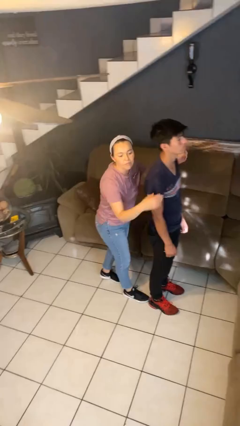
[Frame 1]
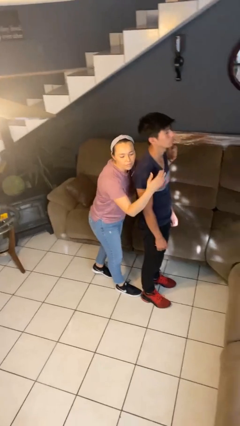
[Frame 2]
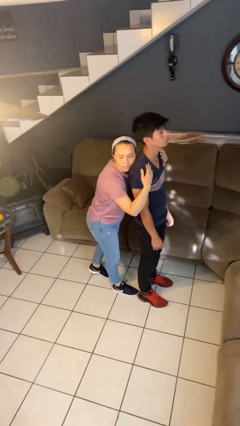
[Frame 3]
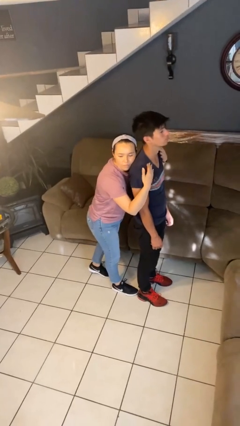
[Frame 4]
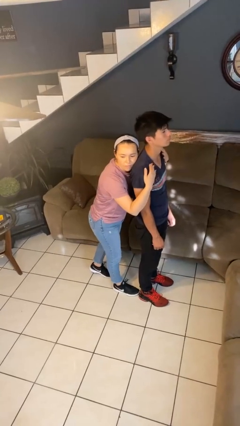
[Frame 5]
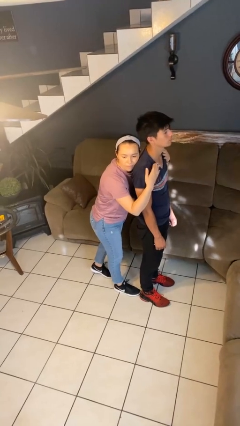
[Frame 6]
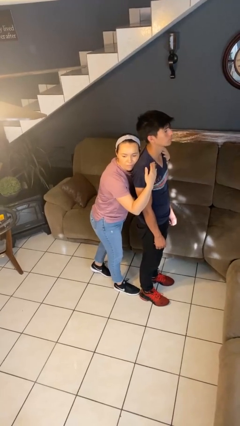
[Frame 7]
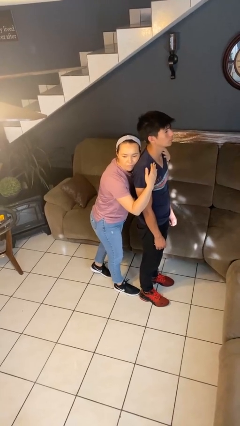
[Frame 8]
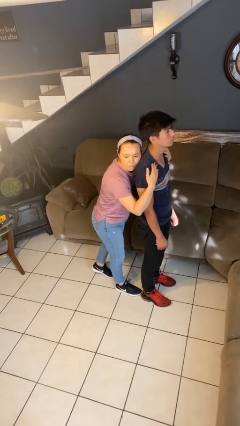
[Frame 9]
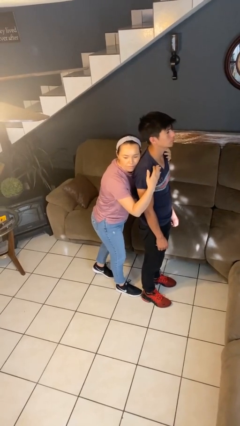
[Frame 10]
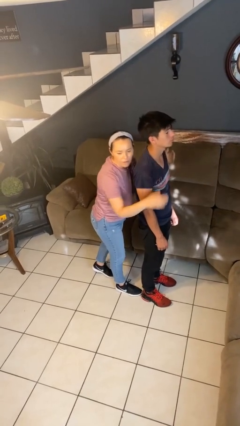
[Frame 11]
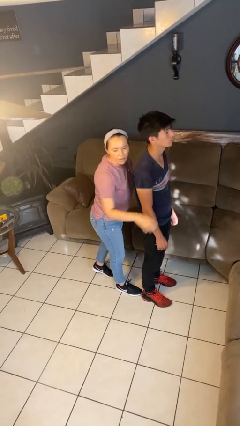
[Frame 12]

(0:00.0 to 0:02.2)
person hugs person from behind

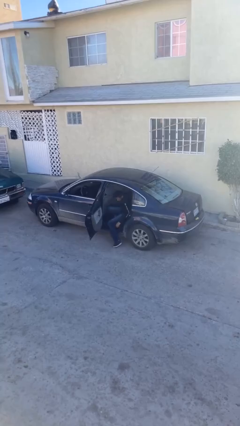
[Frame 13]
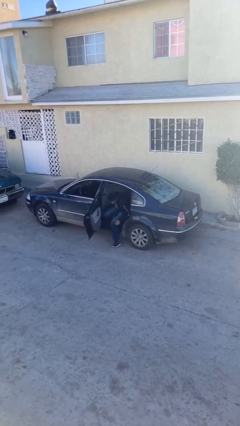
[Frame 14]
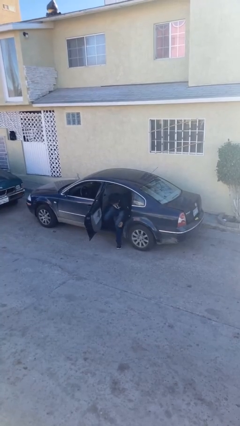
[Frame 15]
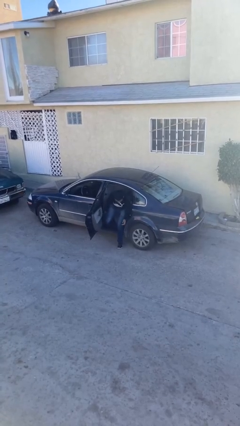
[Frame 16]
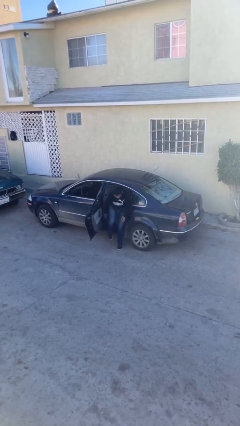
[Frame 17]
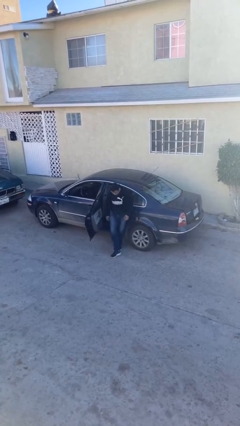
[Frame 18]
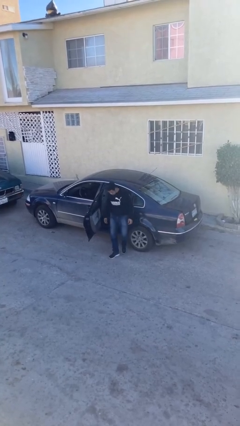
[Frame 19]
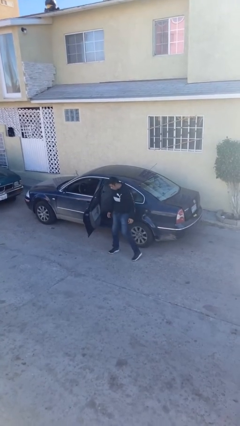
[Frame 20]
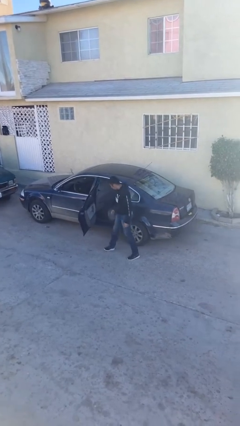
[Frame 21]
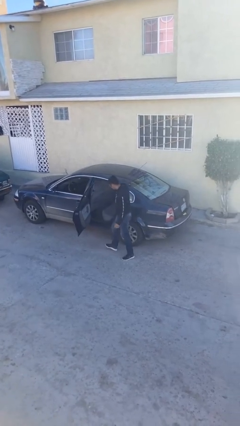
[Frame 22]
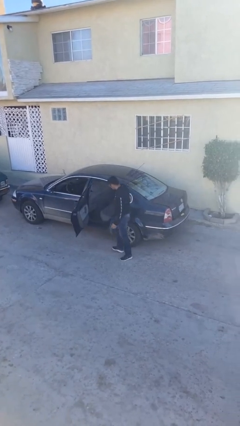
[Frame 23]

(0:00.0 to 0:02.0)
person exits car

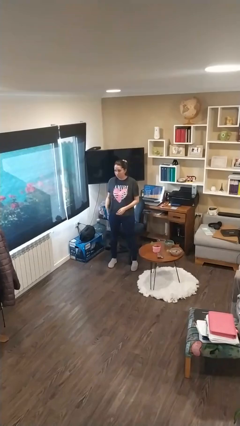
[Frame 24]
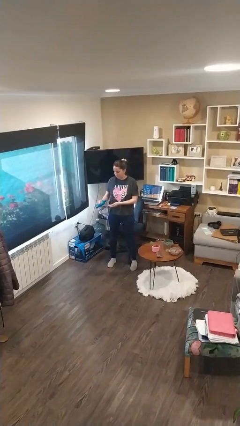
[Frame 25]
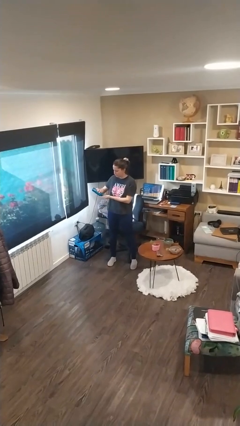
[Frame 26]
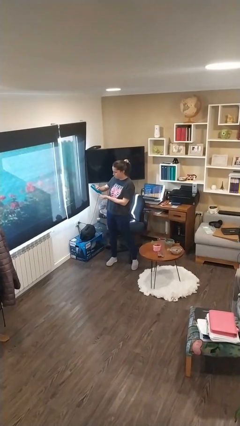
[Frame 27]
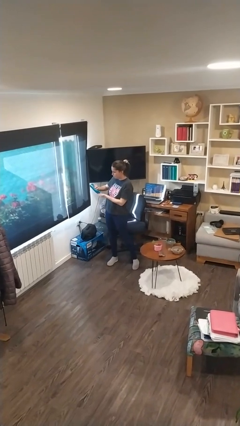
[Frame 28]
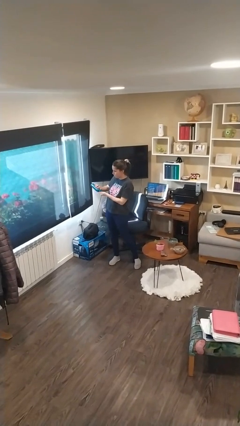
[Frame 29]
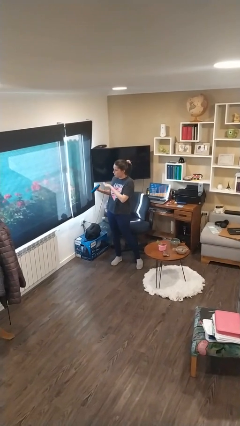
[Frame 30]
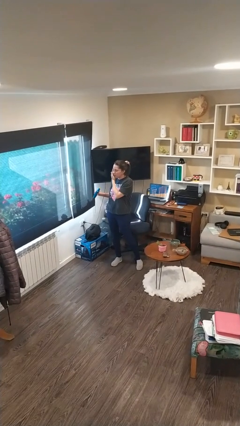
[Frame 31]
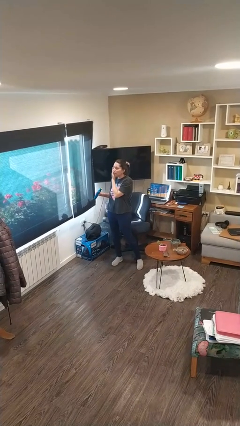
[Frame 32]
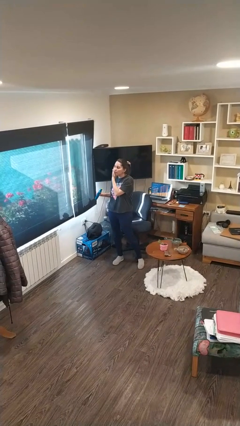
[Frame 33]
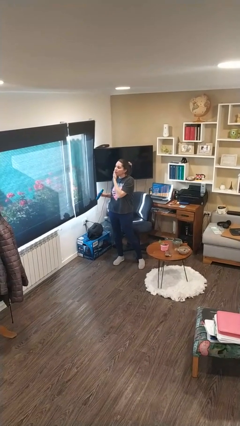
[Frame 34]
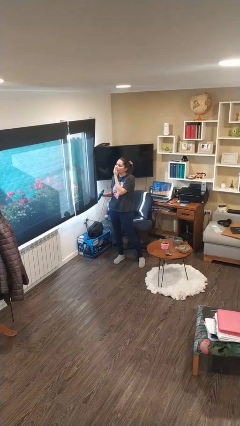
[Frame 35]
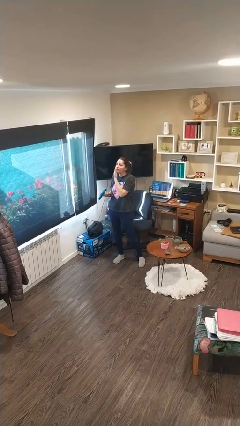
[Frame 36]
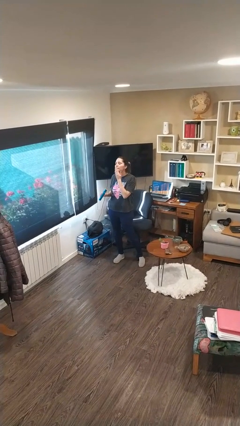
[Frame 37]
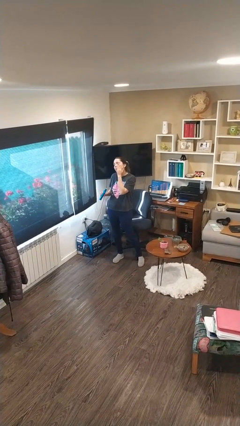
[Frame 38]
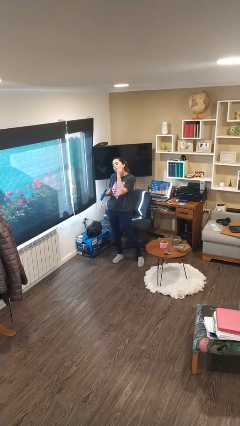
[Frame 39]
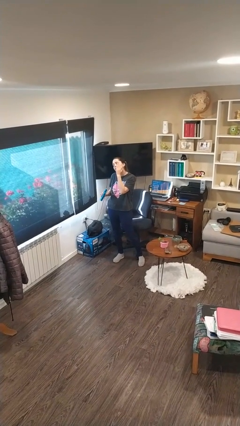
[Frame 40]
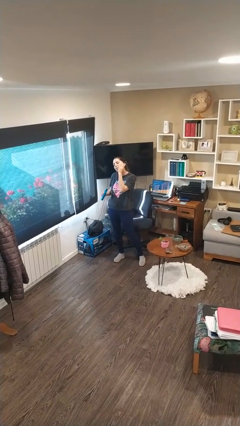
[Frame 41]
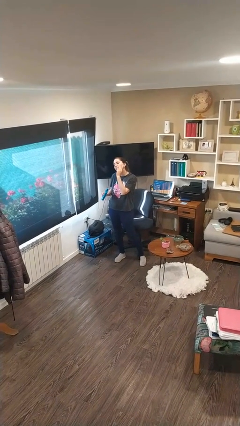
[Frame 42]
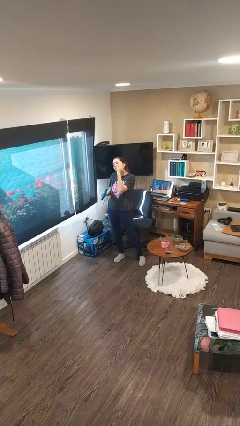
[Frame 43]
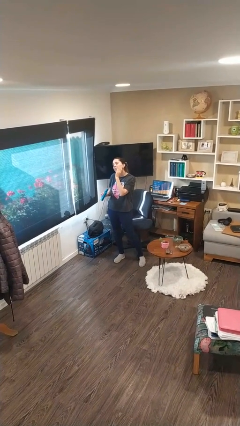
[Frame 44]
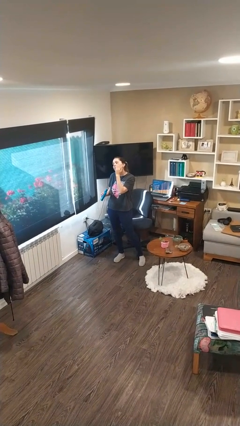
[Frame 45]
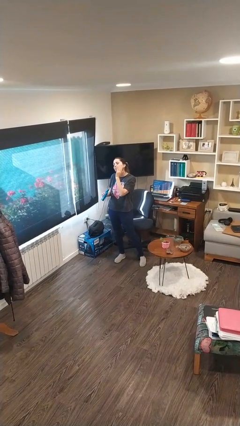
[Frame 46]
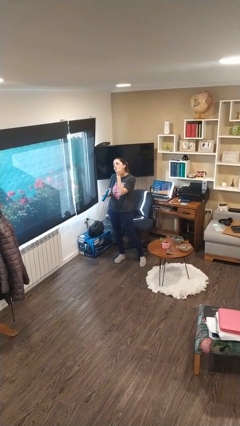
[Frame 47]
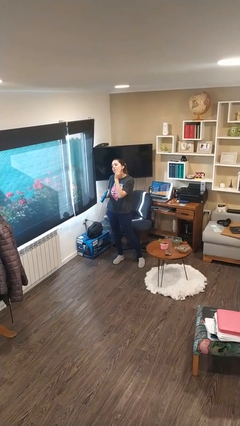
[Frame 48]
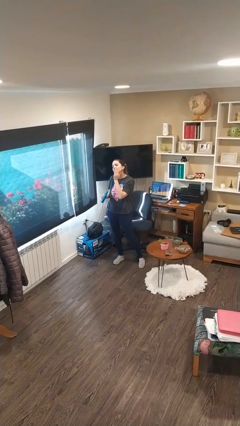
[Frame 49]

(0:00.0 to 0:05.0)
person applies facial moisturizer

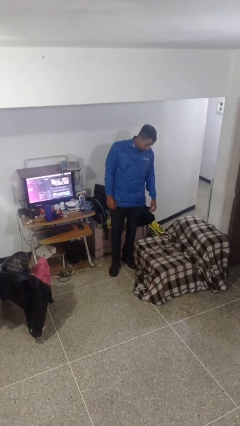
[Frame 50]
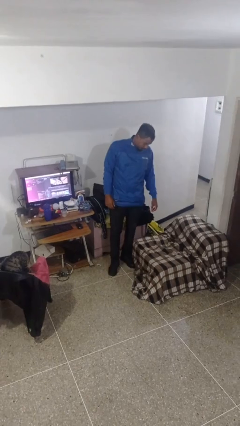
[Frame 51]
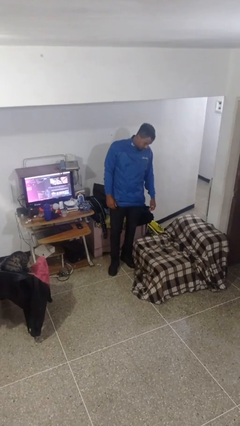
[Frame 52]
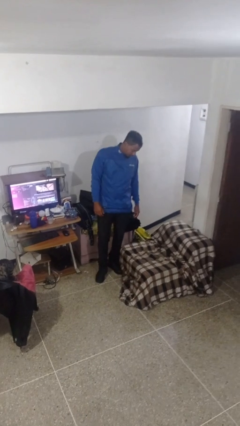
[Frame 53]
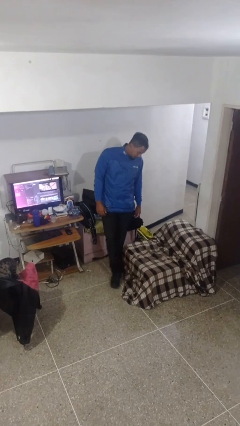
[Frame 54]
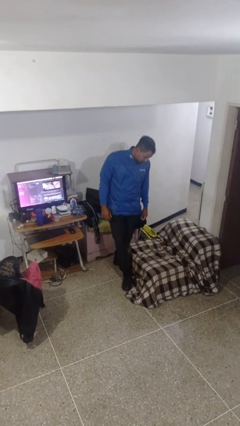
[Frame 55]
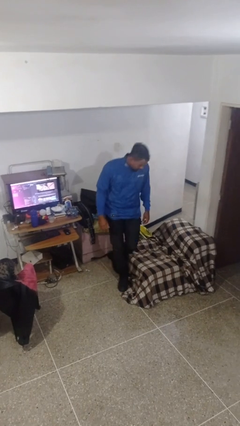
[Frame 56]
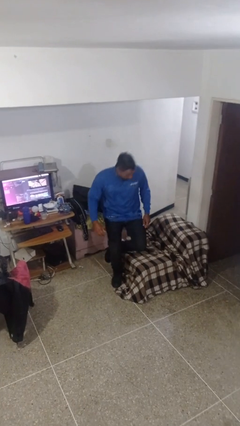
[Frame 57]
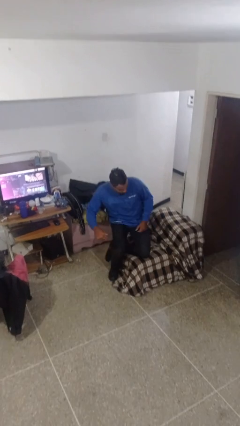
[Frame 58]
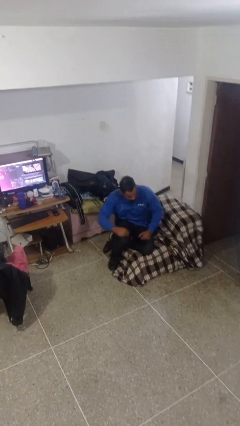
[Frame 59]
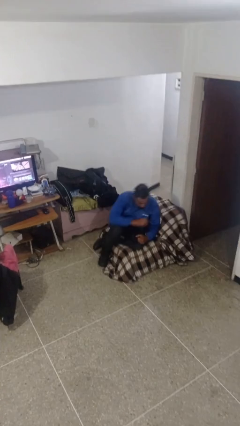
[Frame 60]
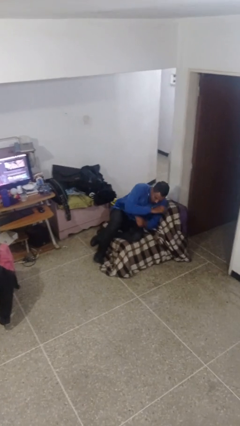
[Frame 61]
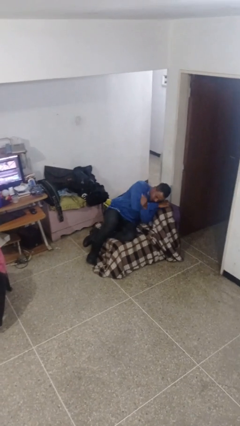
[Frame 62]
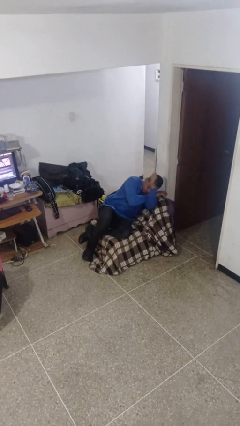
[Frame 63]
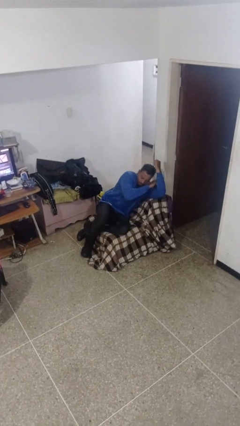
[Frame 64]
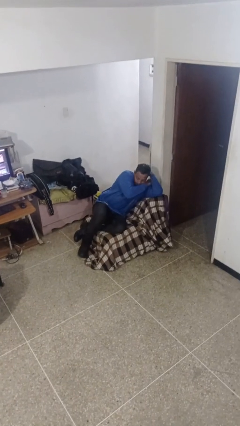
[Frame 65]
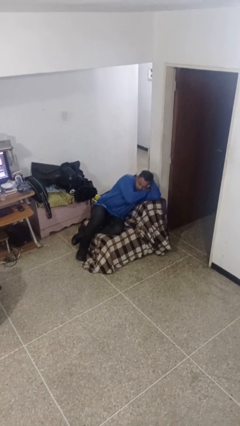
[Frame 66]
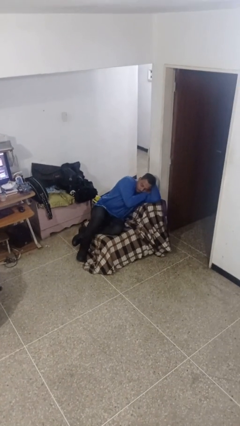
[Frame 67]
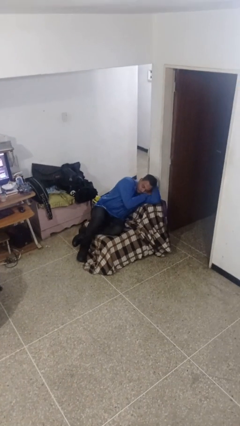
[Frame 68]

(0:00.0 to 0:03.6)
person lies down on couch

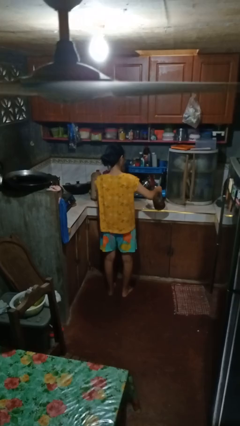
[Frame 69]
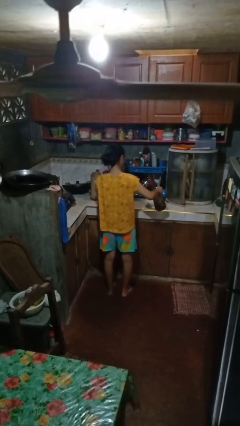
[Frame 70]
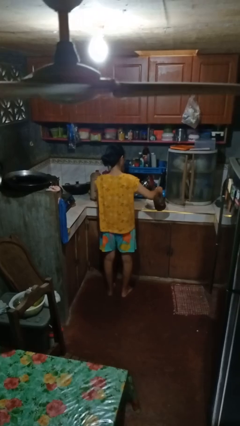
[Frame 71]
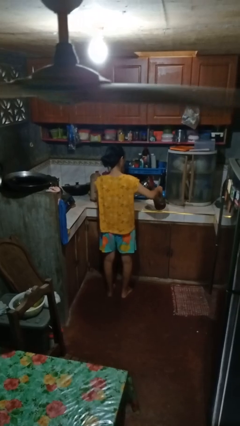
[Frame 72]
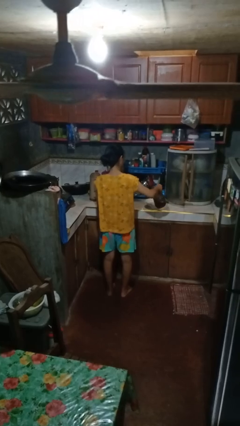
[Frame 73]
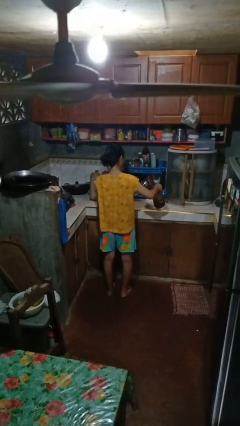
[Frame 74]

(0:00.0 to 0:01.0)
person pours into bowl

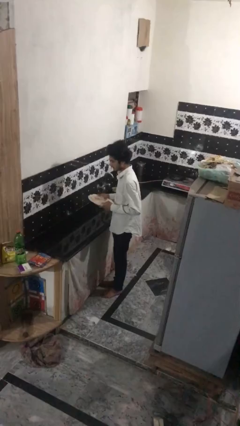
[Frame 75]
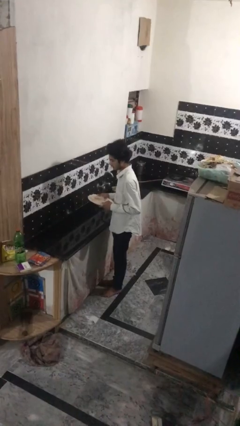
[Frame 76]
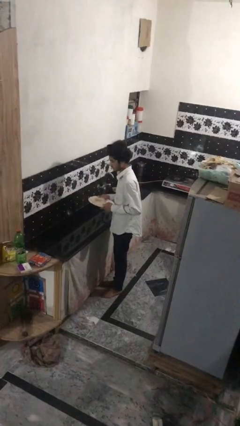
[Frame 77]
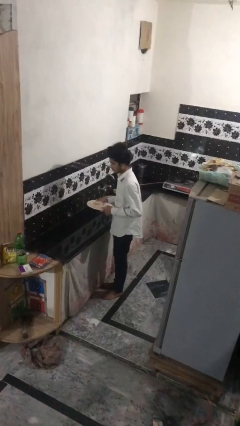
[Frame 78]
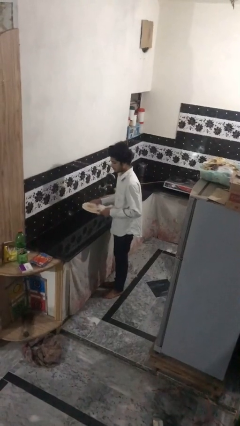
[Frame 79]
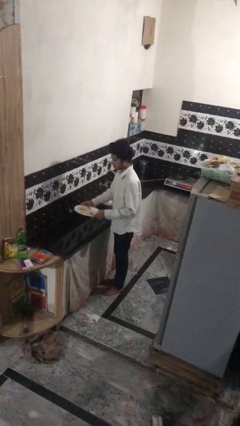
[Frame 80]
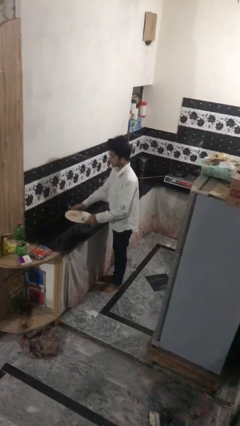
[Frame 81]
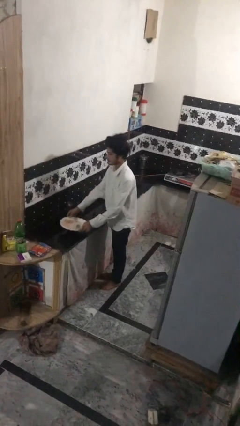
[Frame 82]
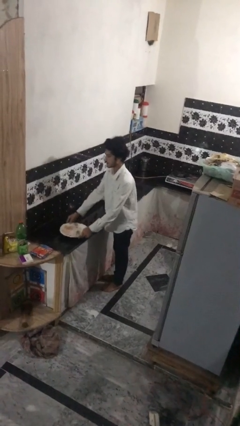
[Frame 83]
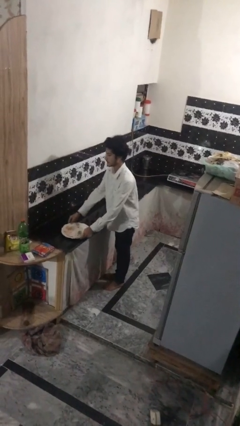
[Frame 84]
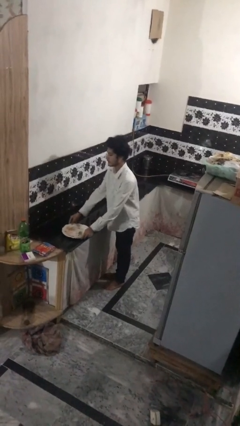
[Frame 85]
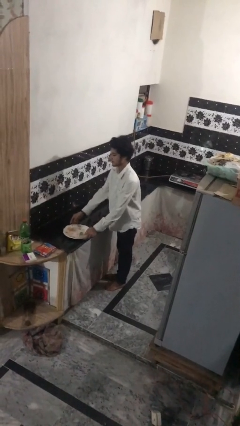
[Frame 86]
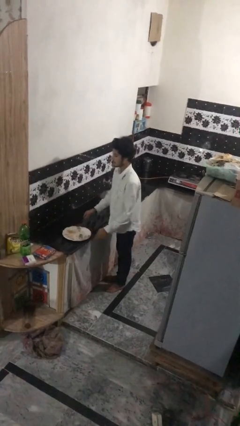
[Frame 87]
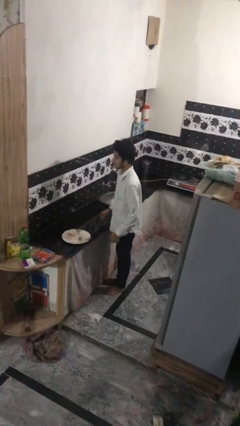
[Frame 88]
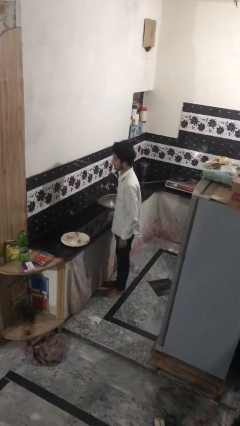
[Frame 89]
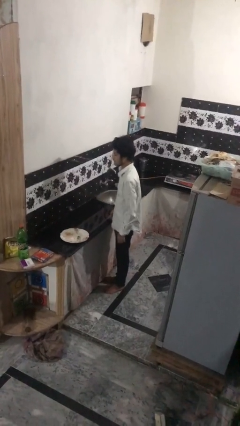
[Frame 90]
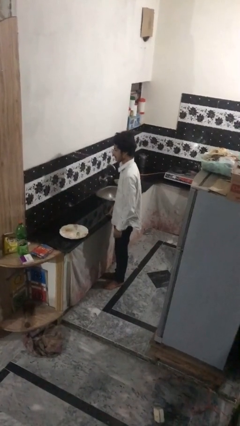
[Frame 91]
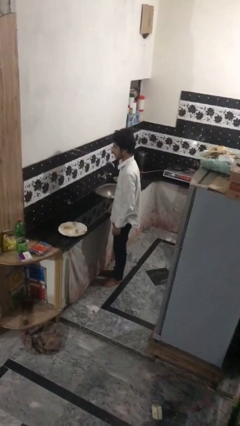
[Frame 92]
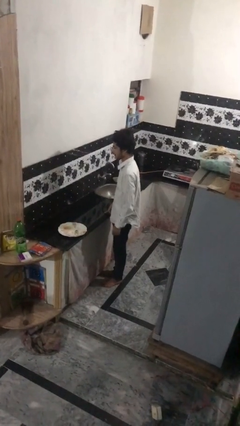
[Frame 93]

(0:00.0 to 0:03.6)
person puts down object on countertop
